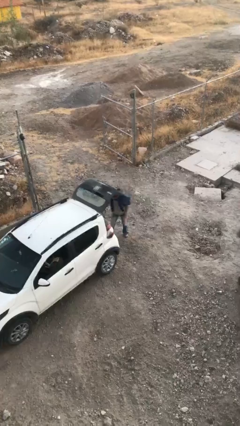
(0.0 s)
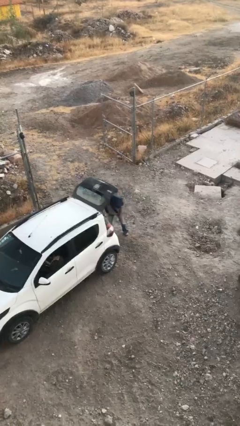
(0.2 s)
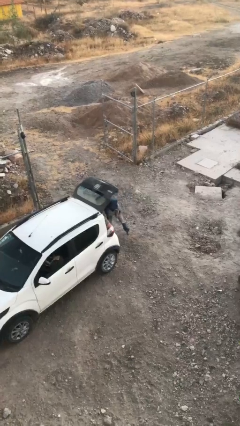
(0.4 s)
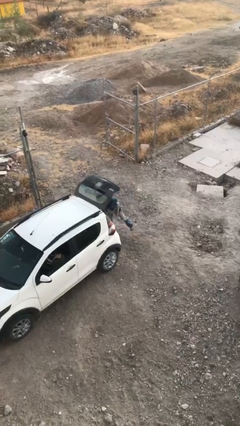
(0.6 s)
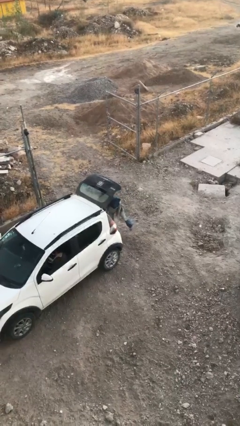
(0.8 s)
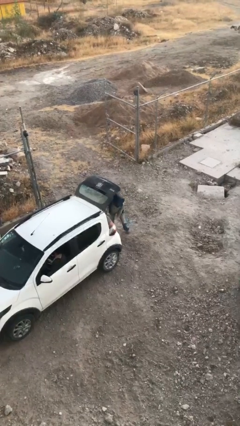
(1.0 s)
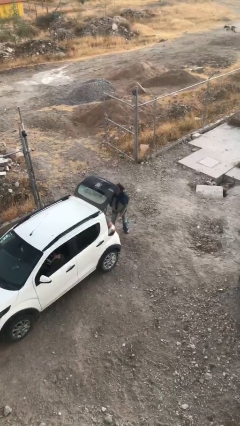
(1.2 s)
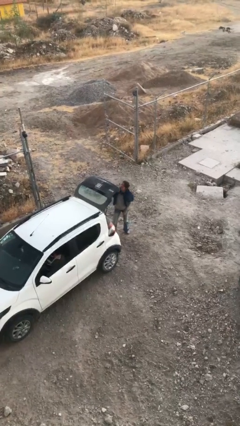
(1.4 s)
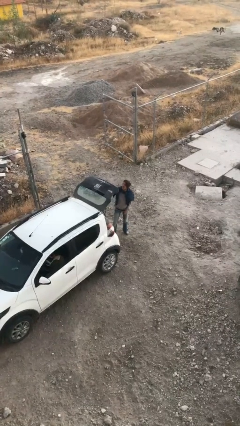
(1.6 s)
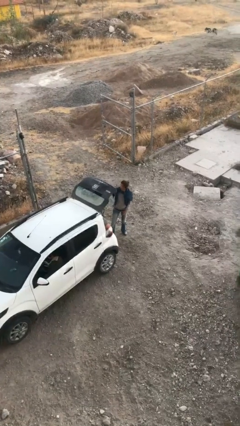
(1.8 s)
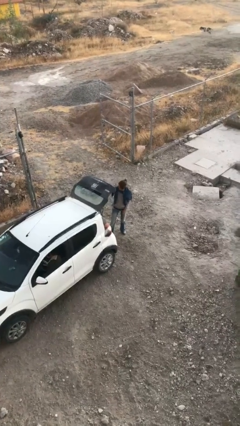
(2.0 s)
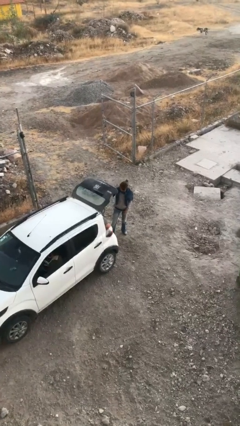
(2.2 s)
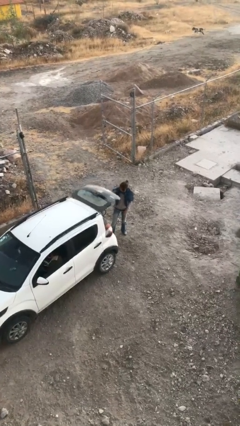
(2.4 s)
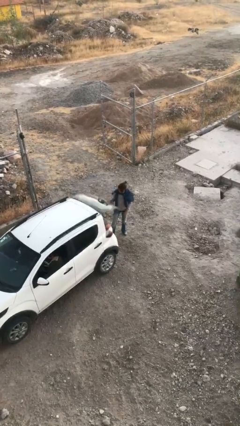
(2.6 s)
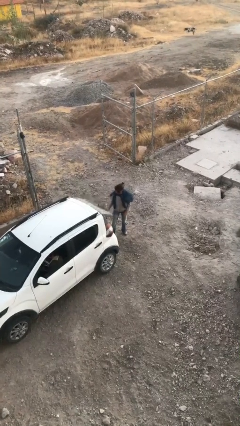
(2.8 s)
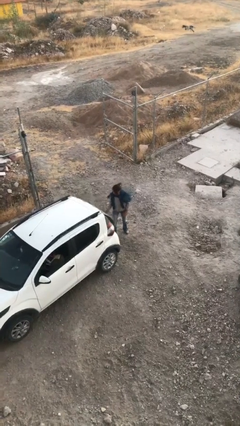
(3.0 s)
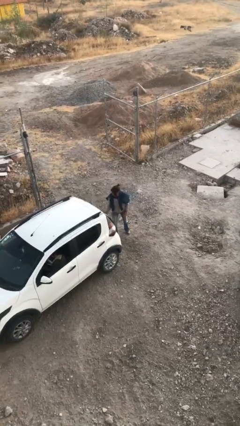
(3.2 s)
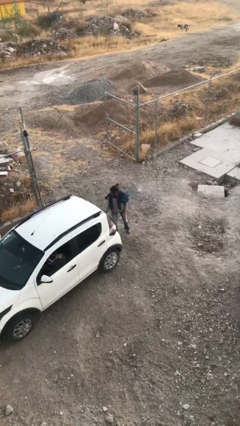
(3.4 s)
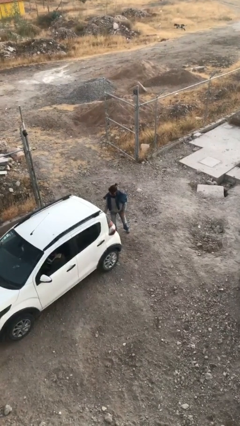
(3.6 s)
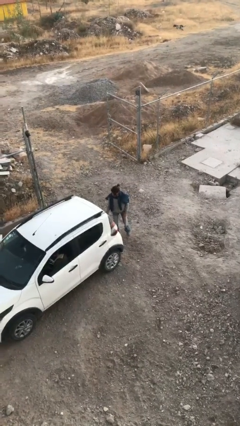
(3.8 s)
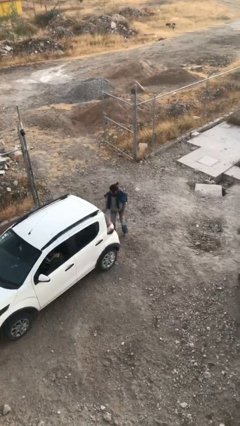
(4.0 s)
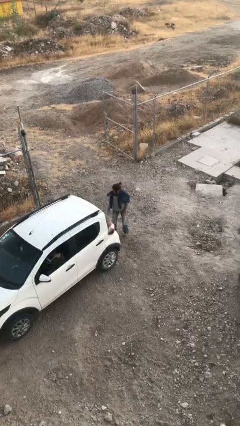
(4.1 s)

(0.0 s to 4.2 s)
person closes car trunk

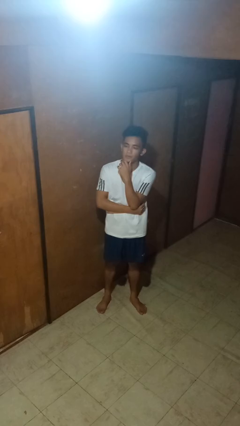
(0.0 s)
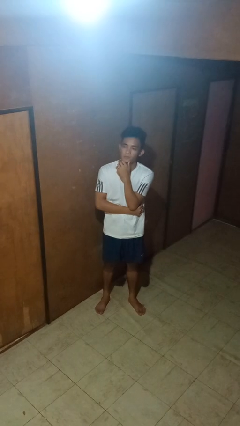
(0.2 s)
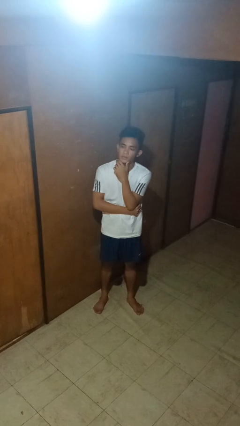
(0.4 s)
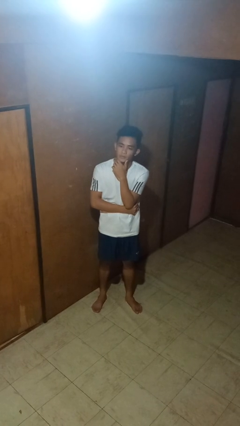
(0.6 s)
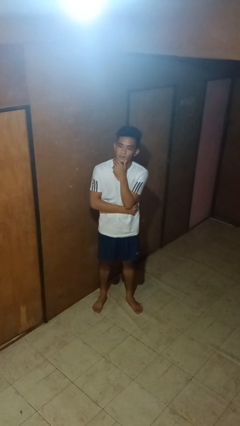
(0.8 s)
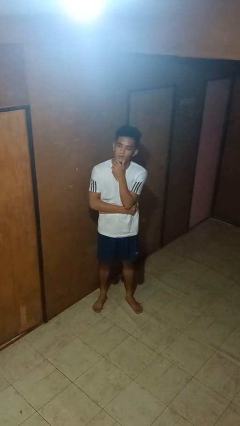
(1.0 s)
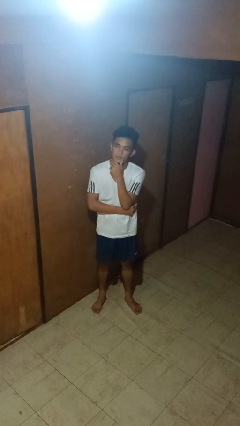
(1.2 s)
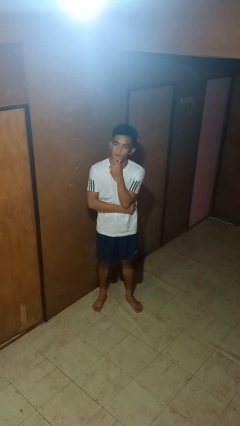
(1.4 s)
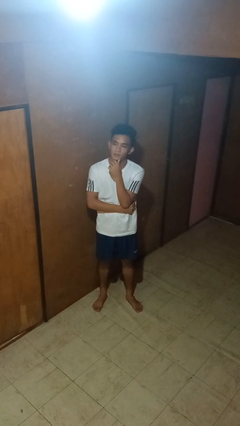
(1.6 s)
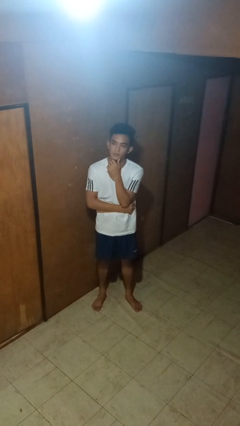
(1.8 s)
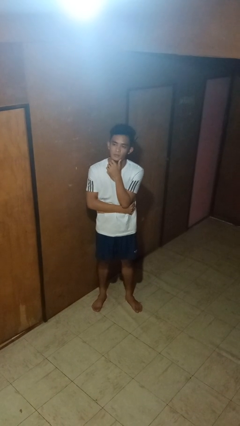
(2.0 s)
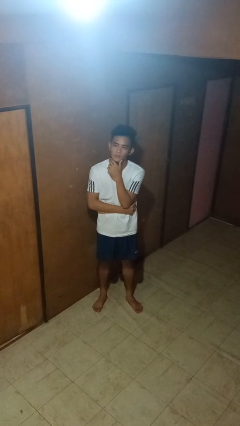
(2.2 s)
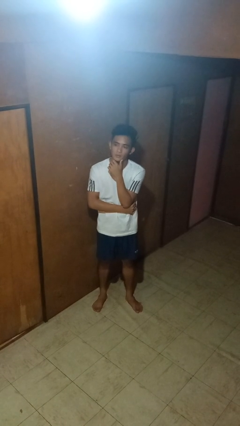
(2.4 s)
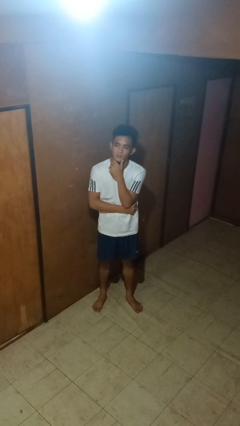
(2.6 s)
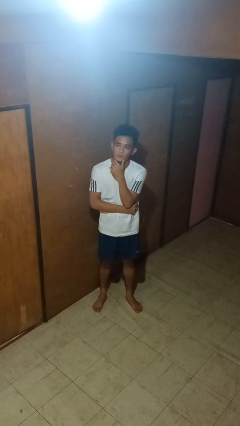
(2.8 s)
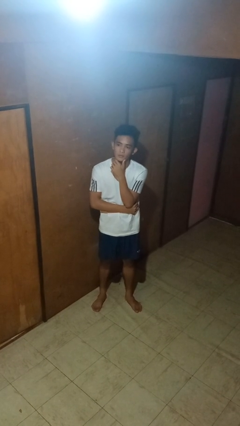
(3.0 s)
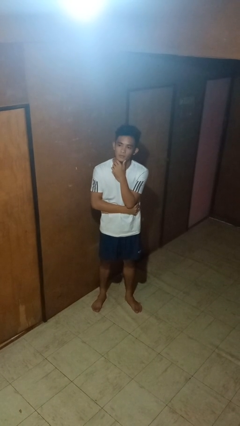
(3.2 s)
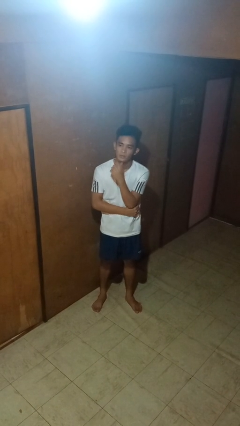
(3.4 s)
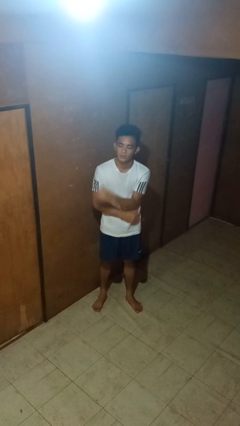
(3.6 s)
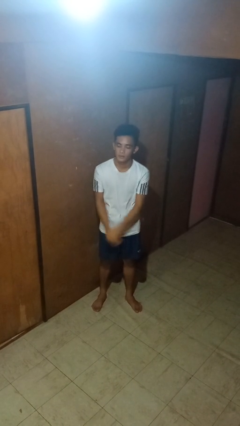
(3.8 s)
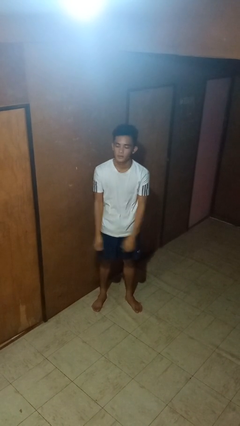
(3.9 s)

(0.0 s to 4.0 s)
person strokes chin

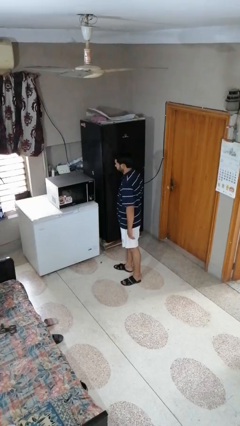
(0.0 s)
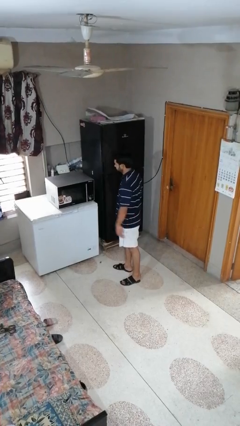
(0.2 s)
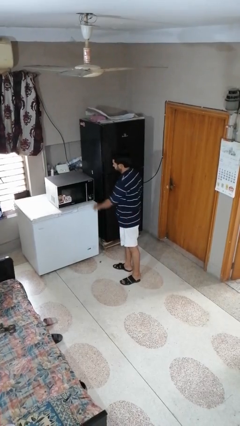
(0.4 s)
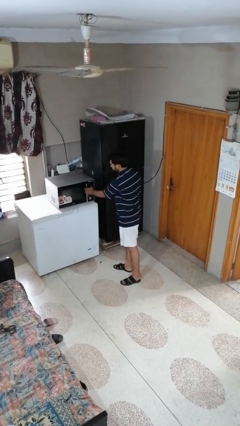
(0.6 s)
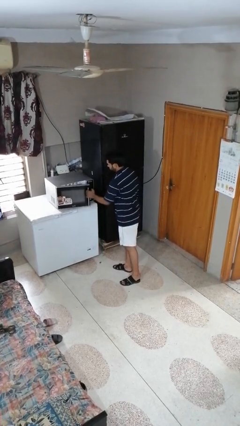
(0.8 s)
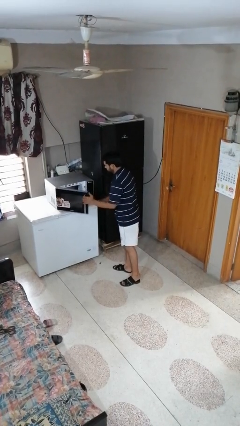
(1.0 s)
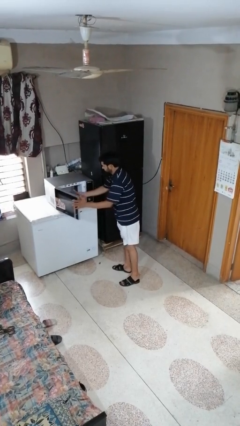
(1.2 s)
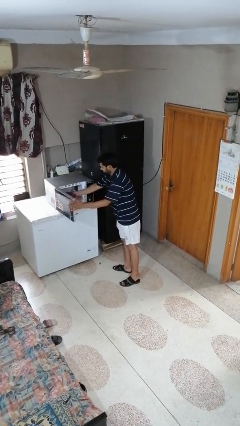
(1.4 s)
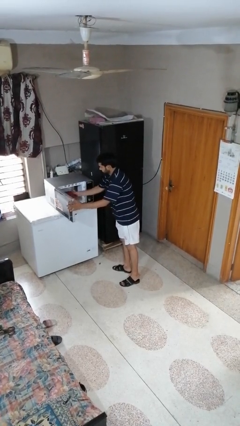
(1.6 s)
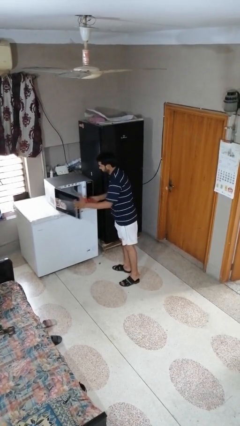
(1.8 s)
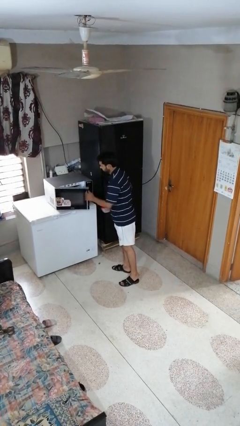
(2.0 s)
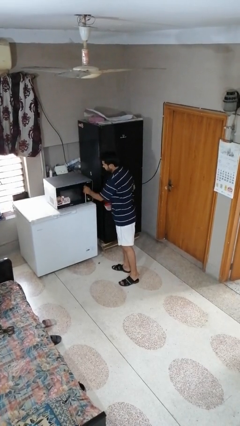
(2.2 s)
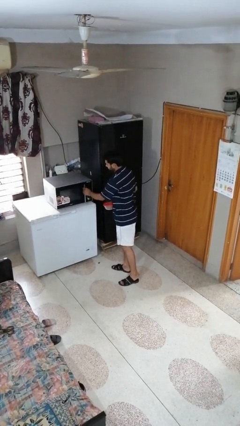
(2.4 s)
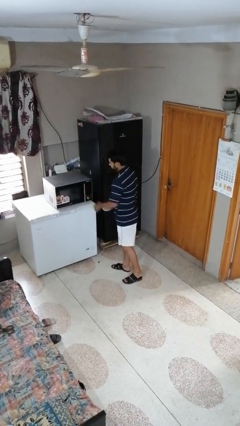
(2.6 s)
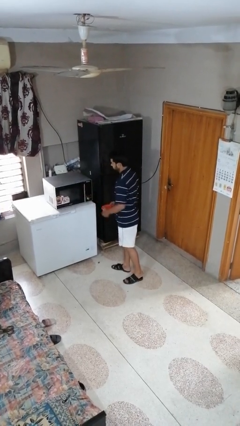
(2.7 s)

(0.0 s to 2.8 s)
person takes object from microwave

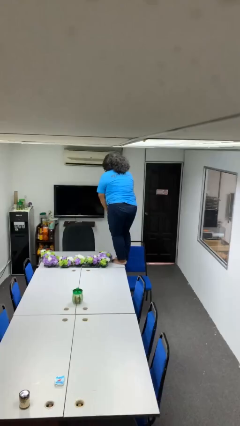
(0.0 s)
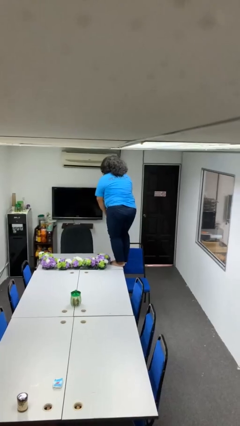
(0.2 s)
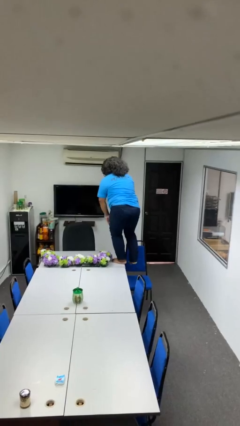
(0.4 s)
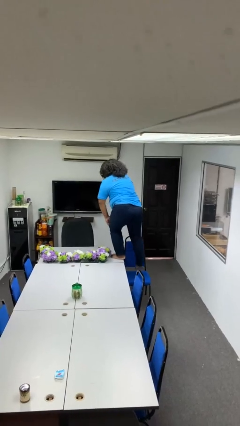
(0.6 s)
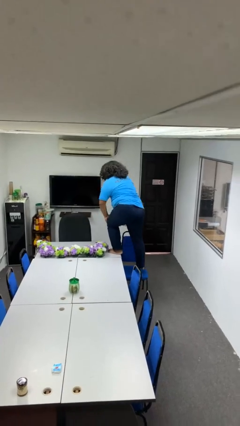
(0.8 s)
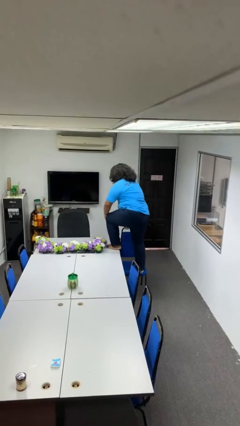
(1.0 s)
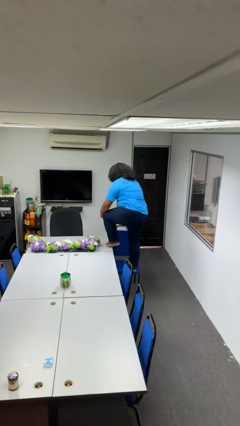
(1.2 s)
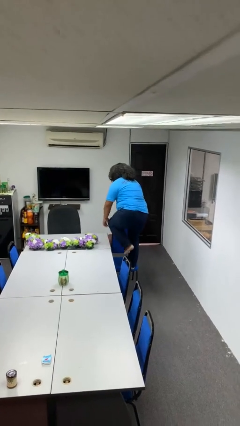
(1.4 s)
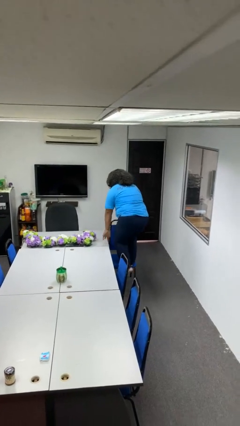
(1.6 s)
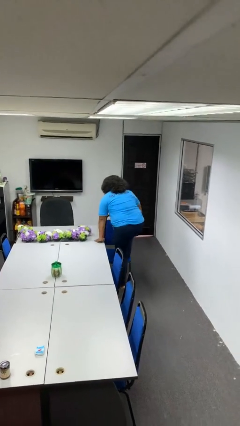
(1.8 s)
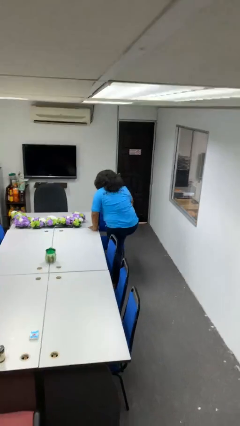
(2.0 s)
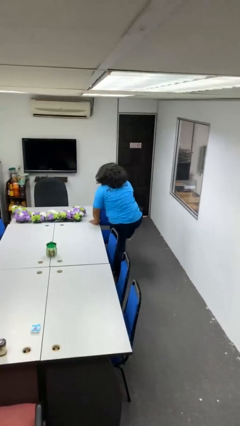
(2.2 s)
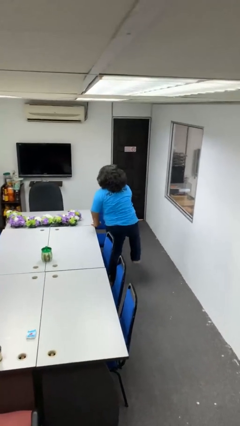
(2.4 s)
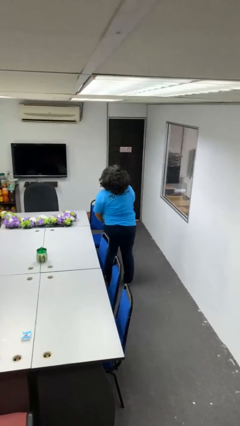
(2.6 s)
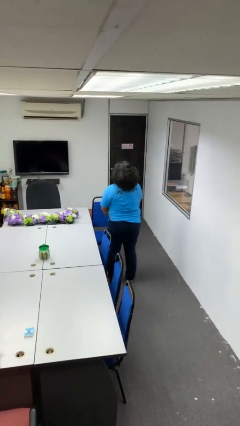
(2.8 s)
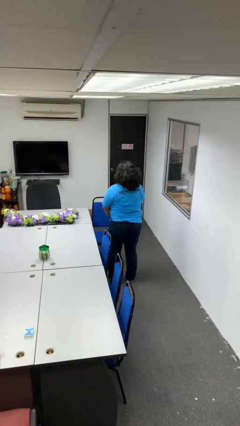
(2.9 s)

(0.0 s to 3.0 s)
person climbs off table

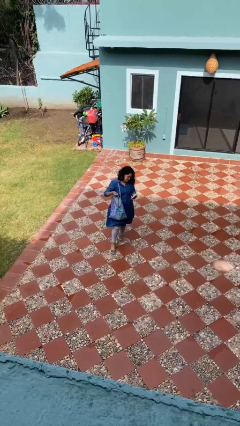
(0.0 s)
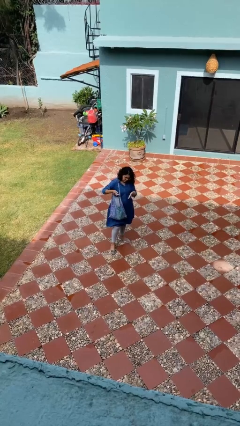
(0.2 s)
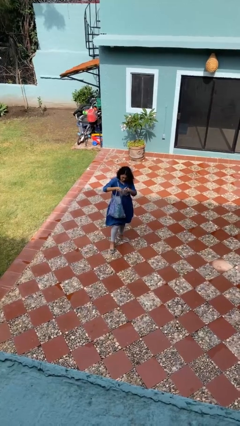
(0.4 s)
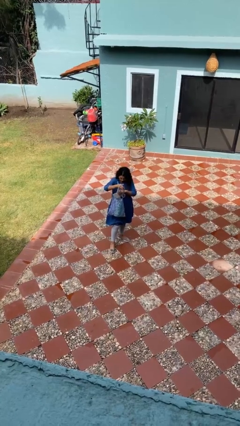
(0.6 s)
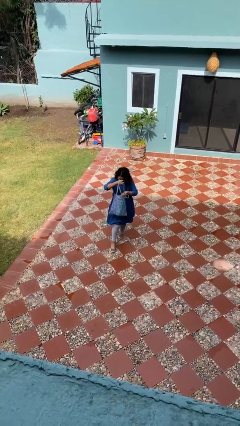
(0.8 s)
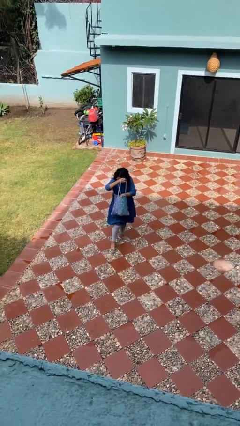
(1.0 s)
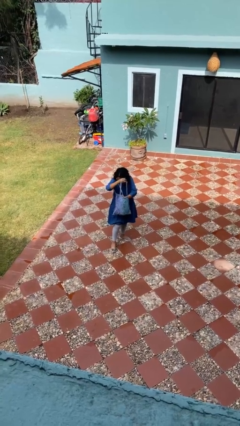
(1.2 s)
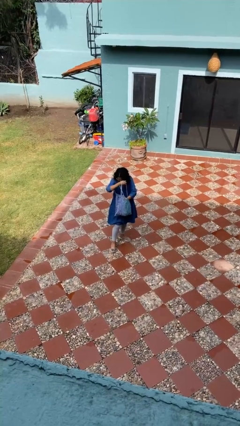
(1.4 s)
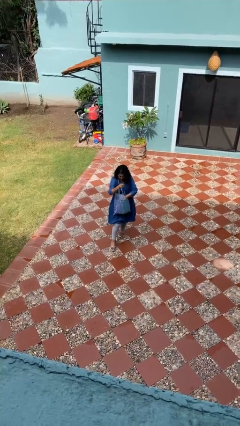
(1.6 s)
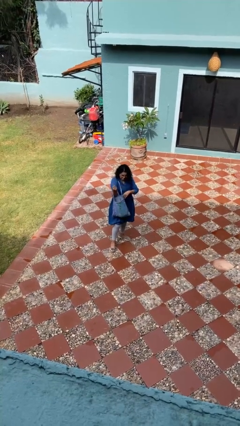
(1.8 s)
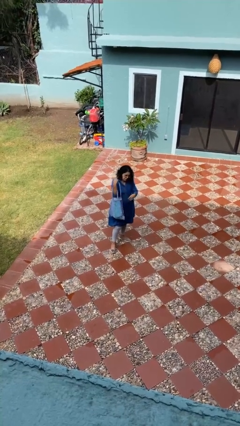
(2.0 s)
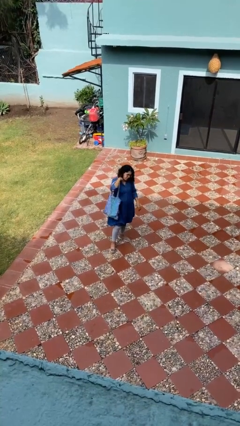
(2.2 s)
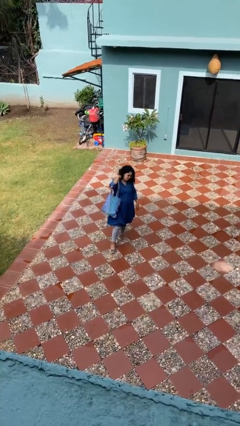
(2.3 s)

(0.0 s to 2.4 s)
person puts object into purse

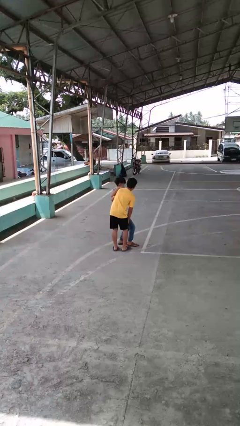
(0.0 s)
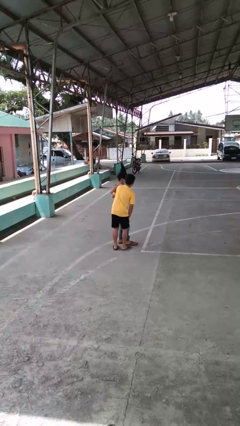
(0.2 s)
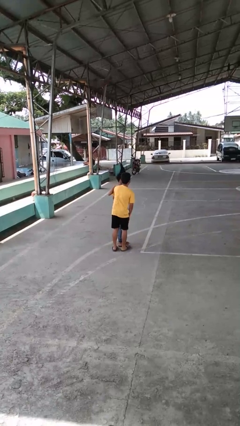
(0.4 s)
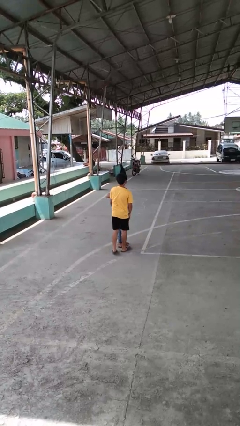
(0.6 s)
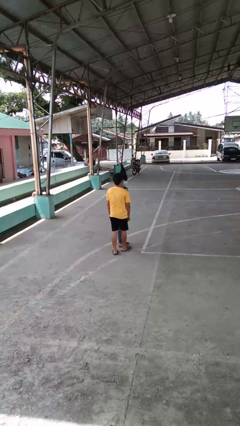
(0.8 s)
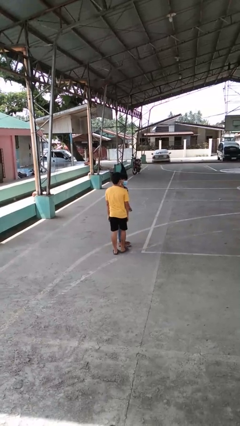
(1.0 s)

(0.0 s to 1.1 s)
person puts down person
